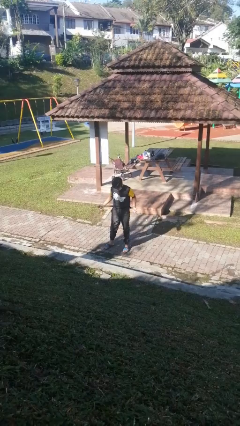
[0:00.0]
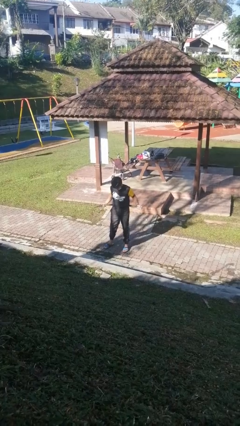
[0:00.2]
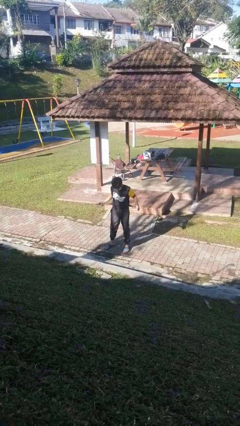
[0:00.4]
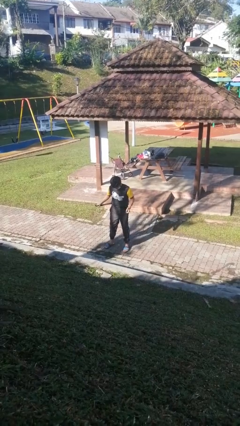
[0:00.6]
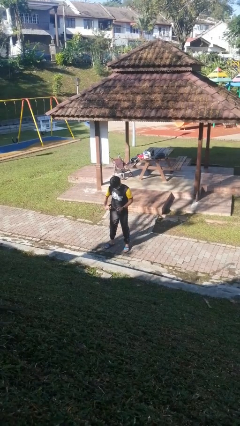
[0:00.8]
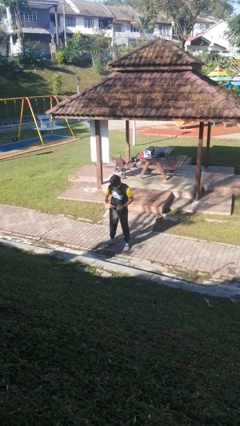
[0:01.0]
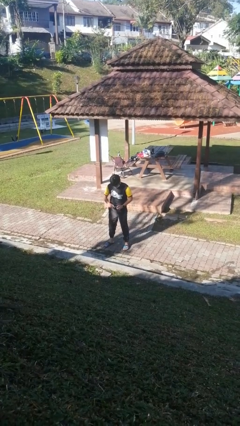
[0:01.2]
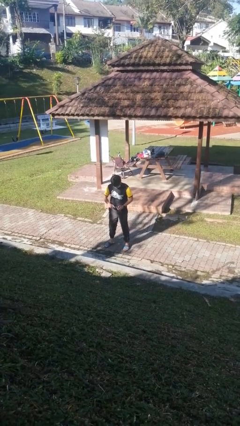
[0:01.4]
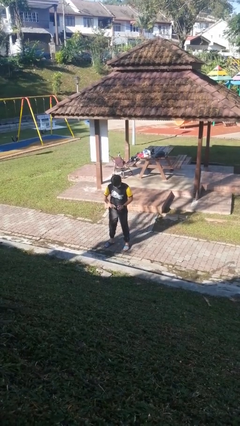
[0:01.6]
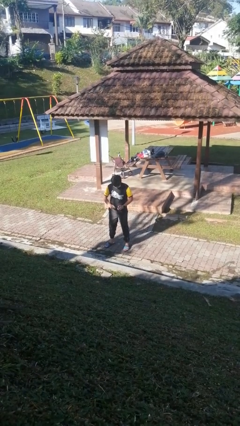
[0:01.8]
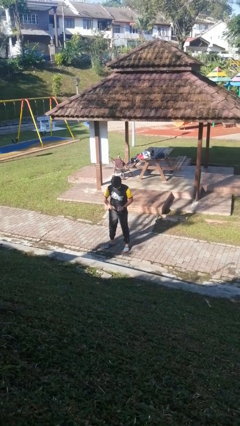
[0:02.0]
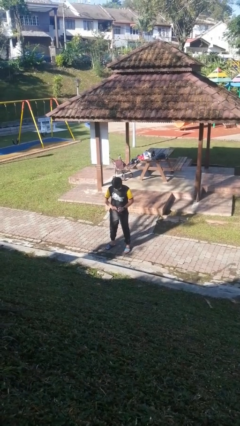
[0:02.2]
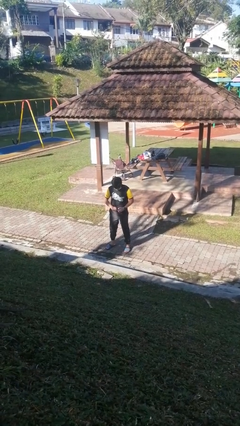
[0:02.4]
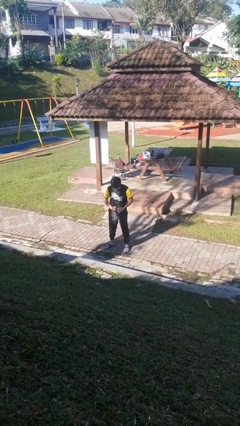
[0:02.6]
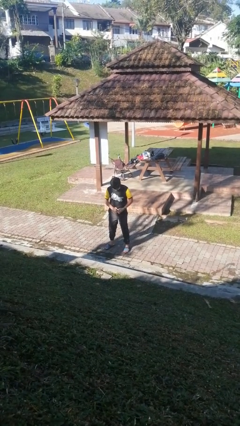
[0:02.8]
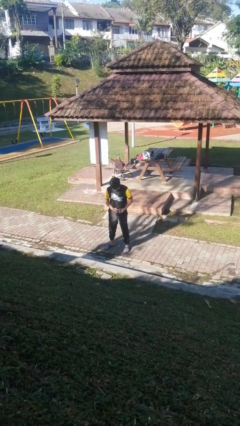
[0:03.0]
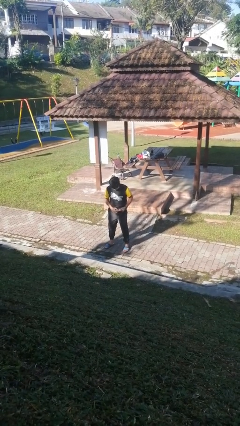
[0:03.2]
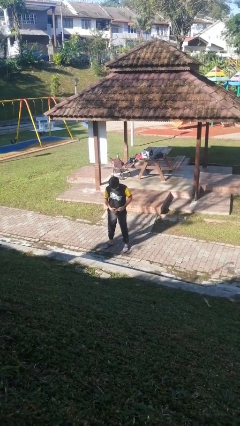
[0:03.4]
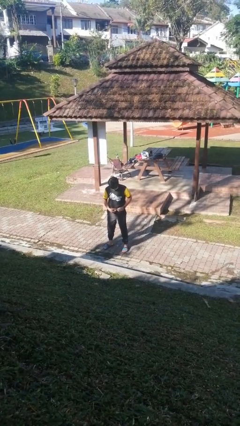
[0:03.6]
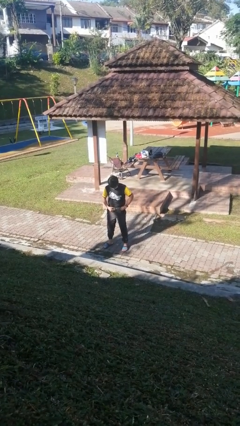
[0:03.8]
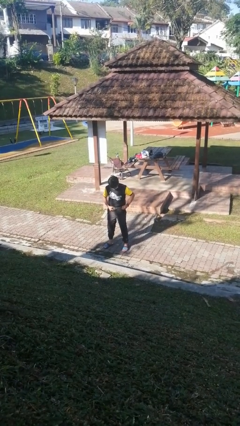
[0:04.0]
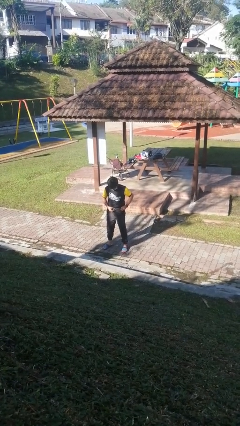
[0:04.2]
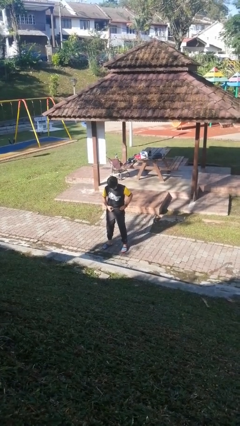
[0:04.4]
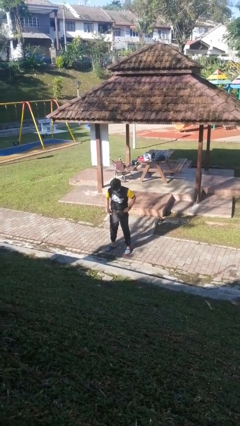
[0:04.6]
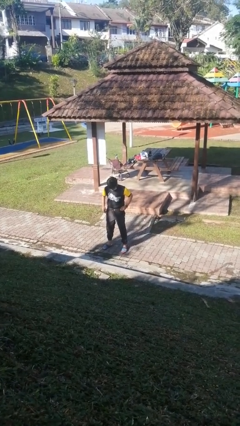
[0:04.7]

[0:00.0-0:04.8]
person puts on belt

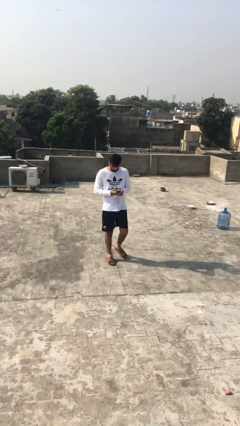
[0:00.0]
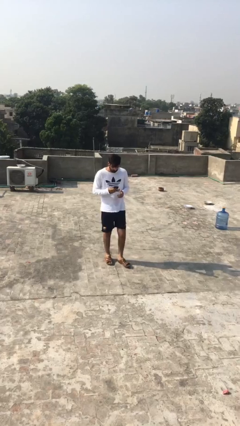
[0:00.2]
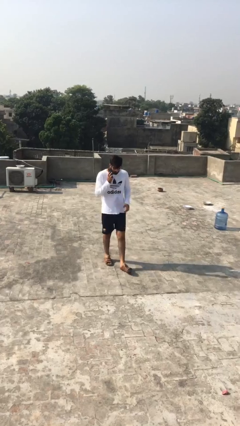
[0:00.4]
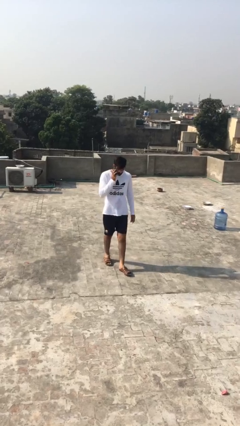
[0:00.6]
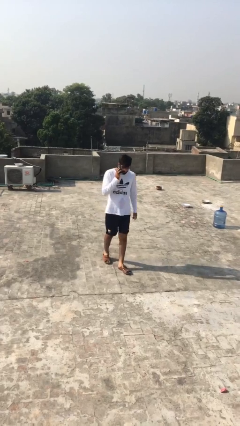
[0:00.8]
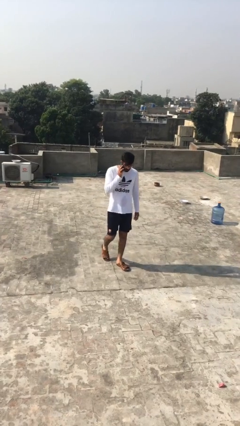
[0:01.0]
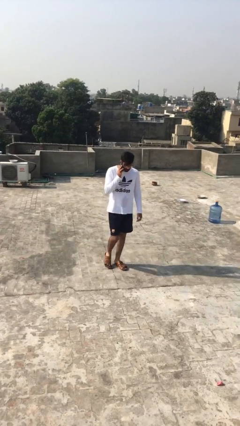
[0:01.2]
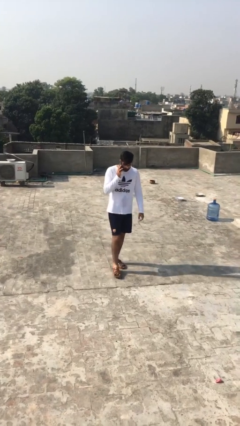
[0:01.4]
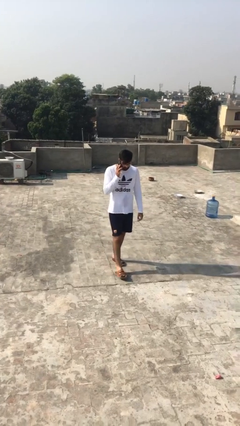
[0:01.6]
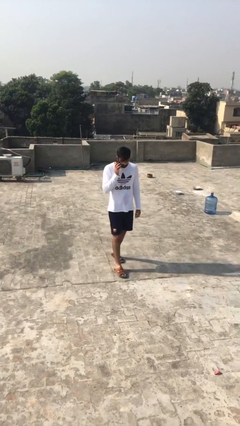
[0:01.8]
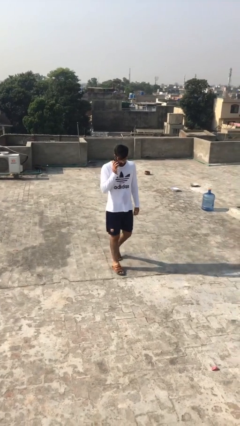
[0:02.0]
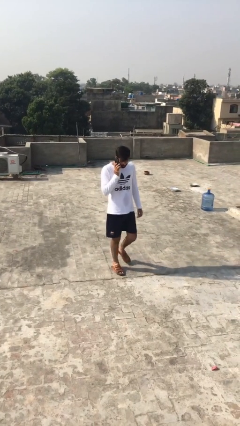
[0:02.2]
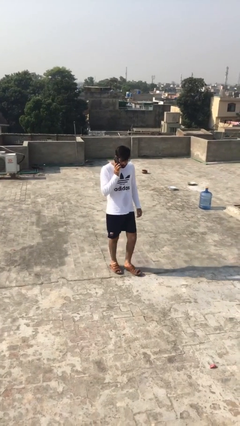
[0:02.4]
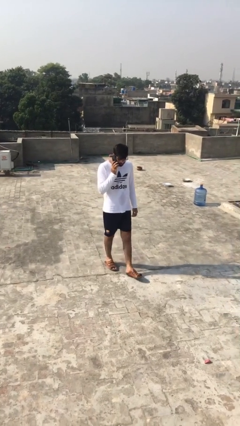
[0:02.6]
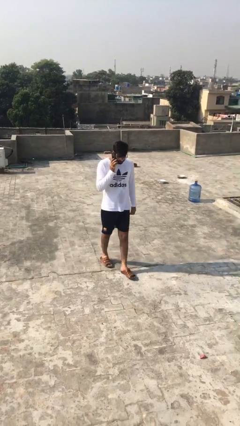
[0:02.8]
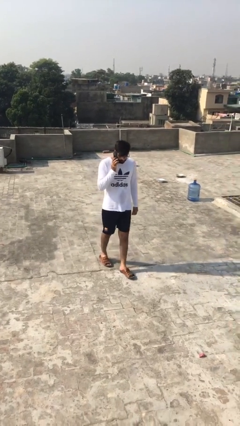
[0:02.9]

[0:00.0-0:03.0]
person talks on phone

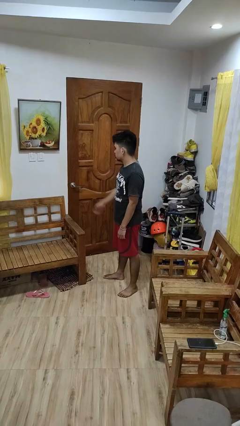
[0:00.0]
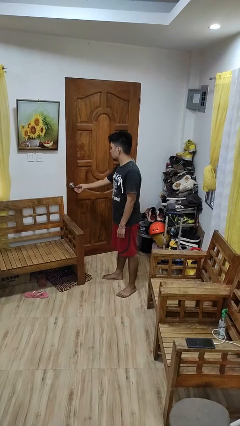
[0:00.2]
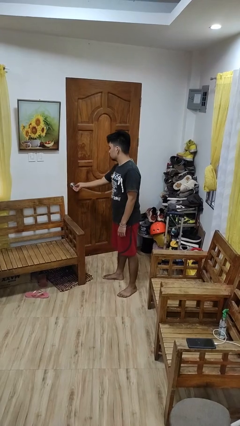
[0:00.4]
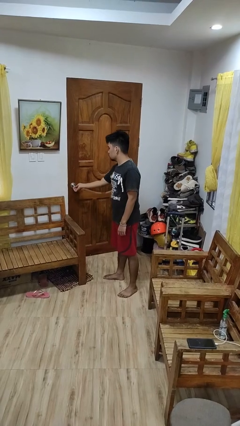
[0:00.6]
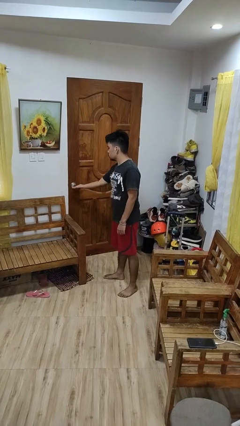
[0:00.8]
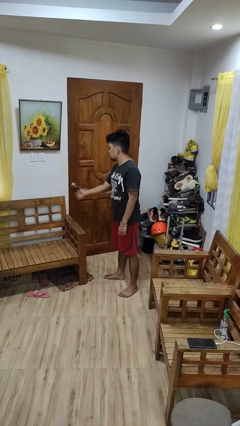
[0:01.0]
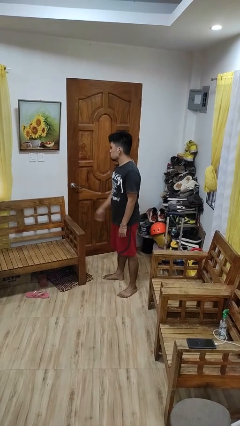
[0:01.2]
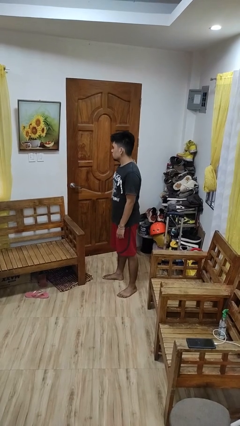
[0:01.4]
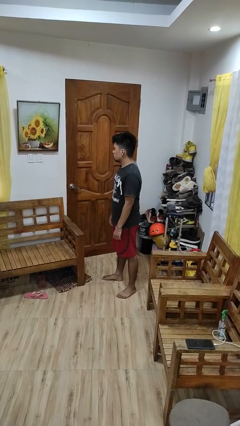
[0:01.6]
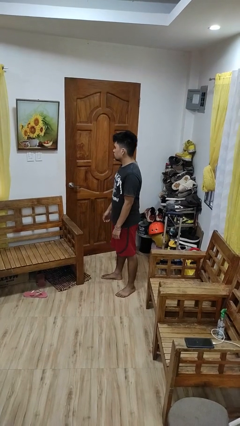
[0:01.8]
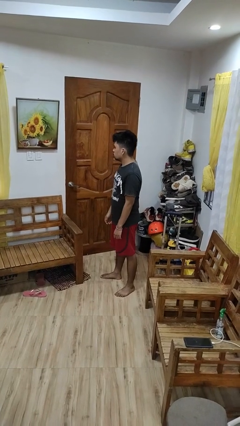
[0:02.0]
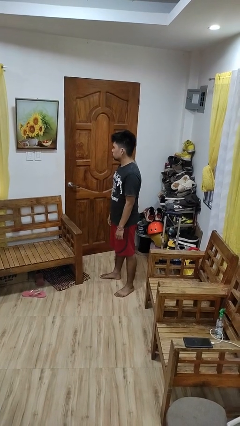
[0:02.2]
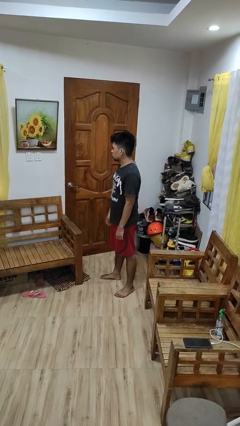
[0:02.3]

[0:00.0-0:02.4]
person unlocks door with keys

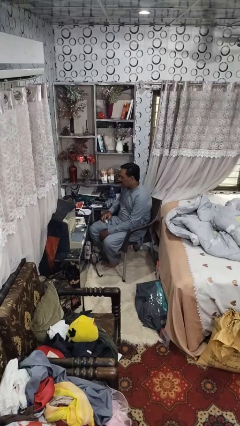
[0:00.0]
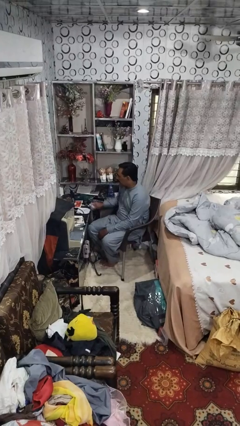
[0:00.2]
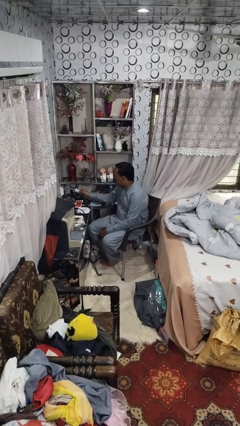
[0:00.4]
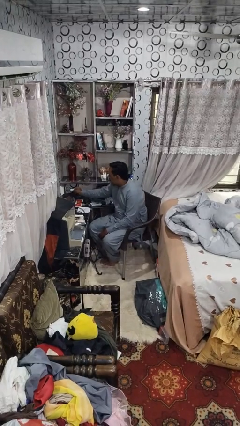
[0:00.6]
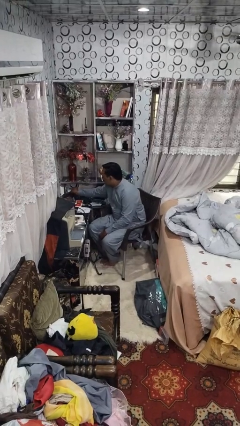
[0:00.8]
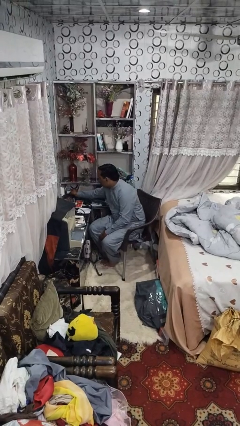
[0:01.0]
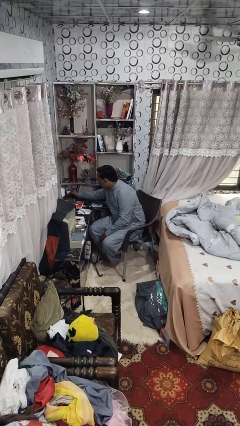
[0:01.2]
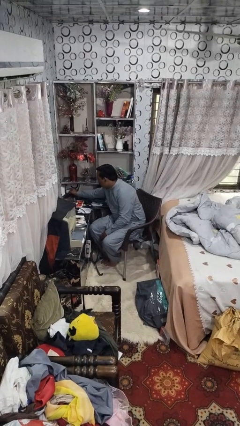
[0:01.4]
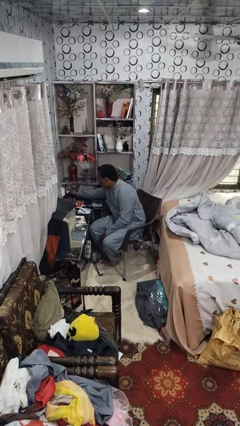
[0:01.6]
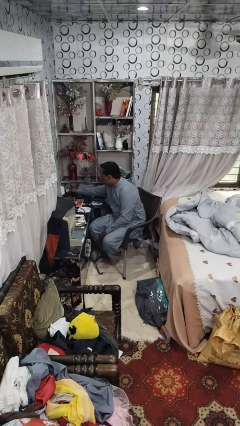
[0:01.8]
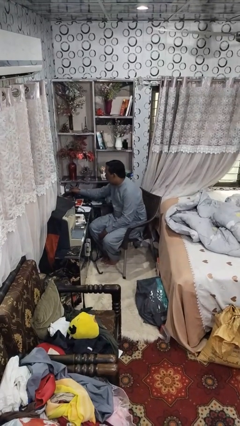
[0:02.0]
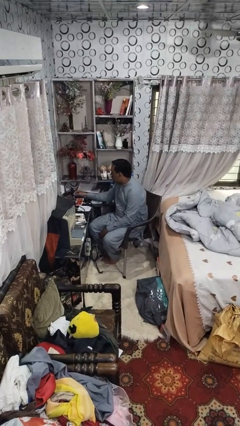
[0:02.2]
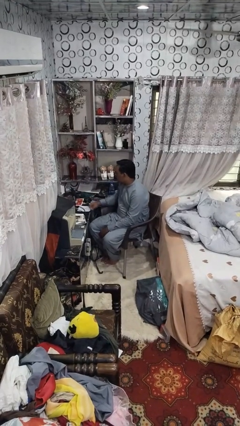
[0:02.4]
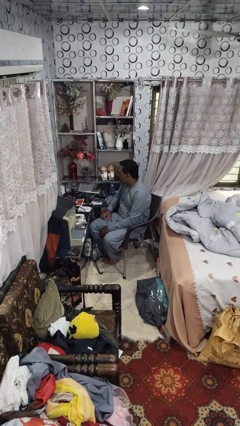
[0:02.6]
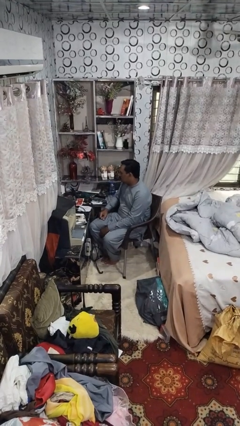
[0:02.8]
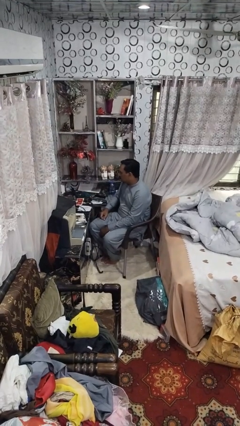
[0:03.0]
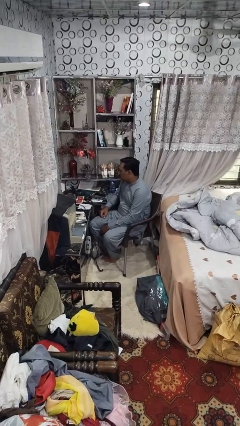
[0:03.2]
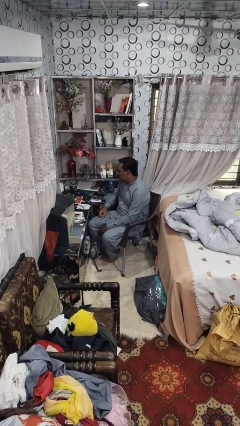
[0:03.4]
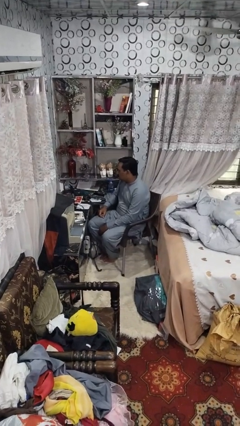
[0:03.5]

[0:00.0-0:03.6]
person plugs into electrical socket

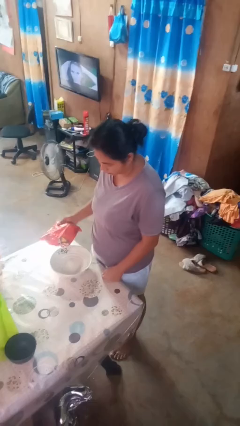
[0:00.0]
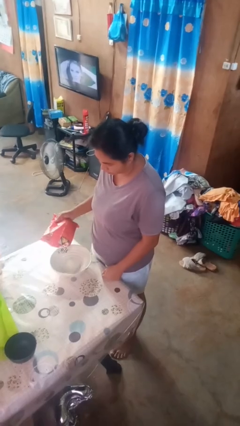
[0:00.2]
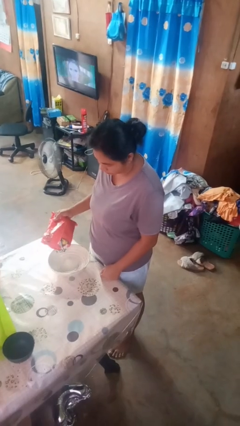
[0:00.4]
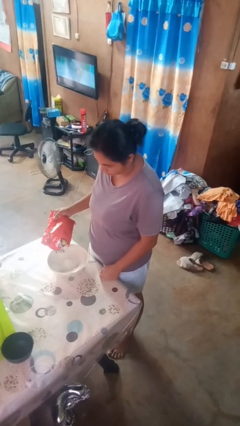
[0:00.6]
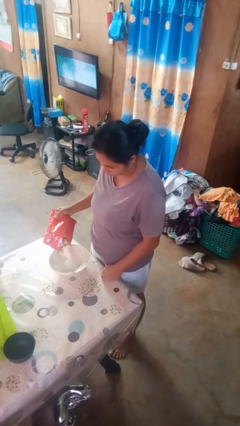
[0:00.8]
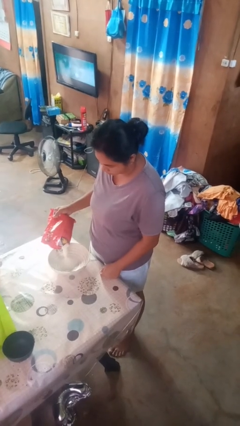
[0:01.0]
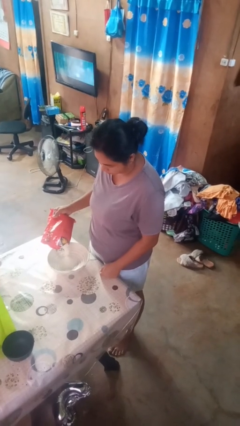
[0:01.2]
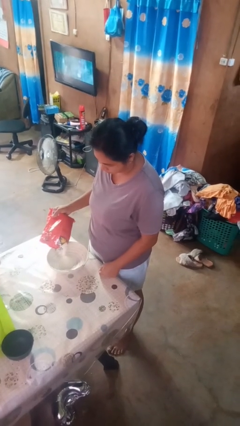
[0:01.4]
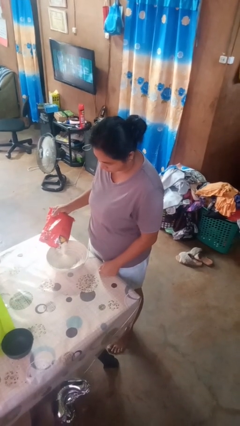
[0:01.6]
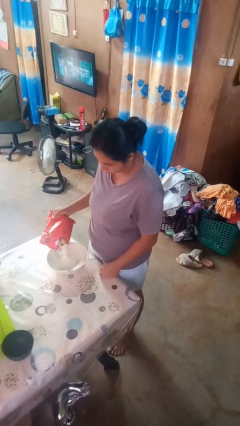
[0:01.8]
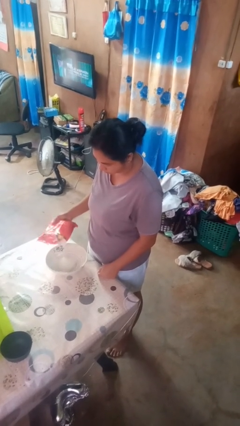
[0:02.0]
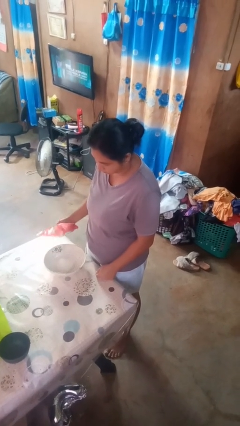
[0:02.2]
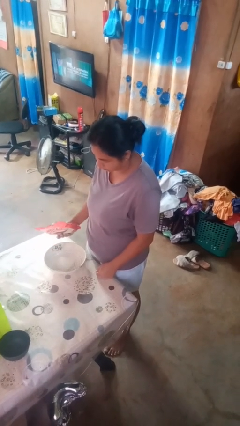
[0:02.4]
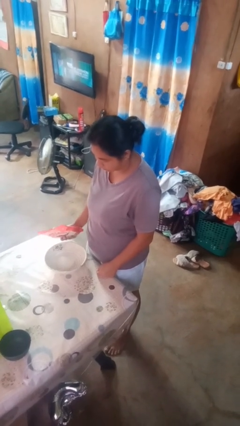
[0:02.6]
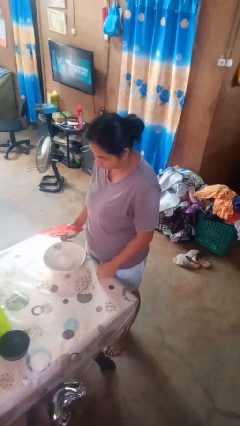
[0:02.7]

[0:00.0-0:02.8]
person pours into bowl

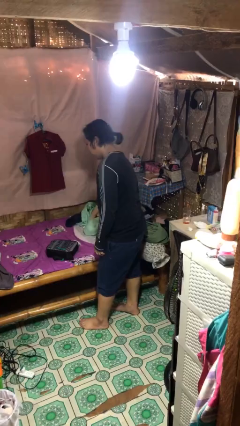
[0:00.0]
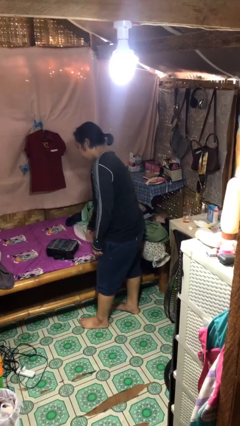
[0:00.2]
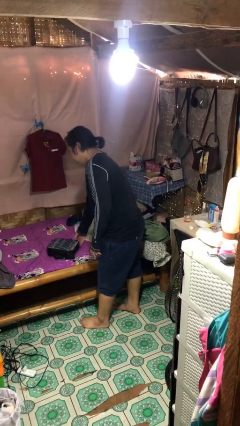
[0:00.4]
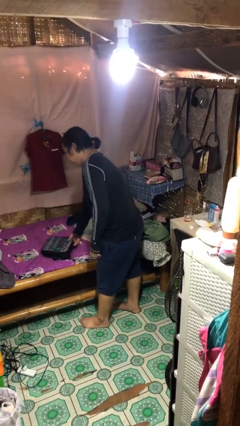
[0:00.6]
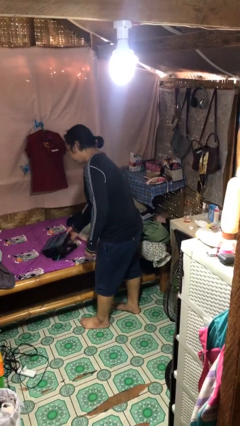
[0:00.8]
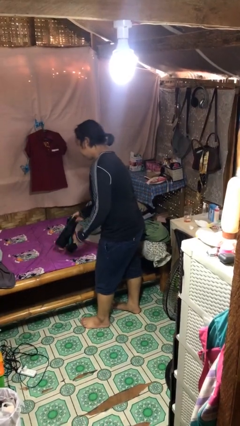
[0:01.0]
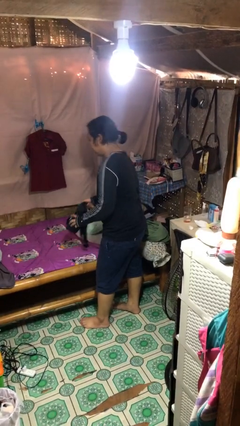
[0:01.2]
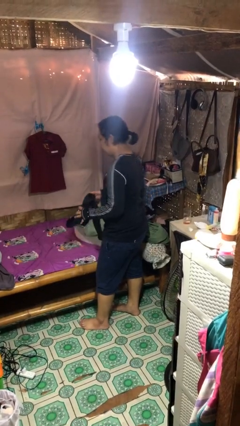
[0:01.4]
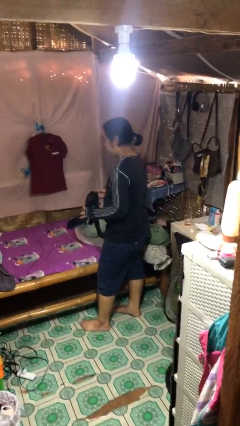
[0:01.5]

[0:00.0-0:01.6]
person picks up object from bed
